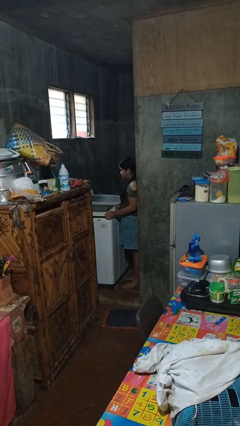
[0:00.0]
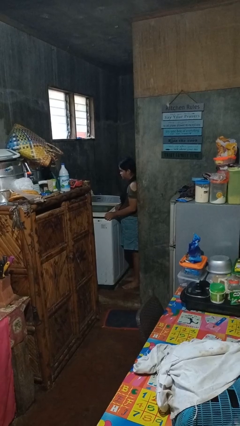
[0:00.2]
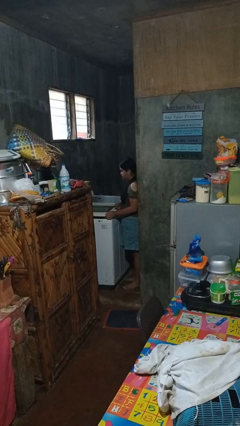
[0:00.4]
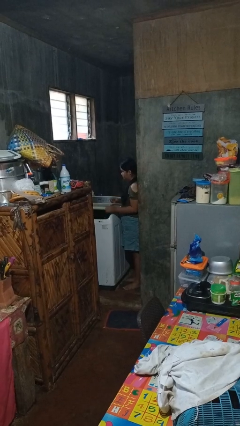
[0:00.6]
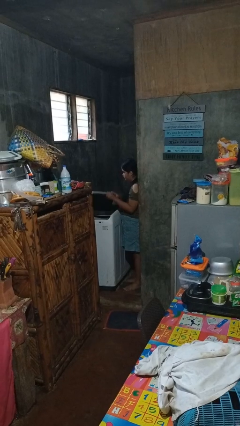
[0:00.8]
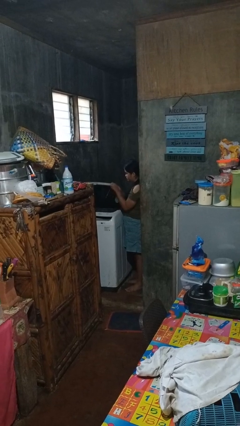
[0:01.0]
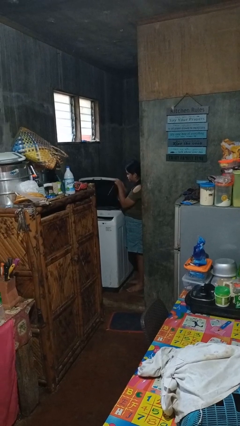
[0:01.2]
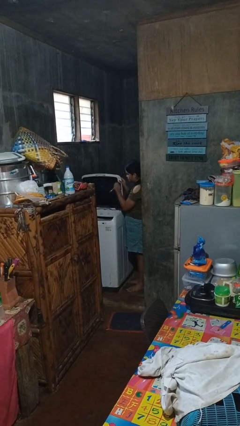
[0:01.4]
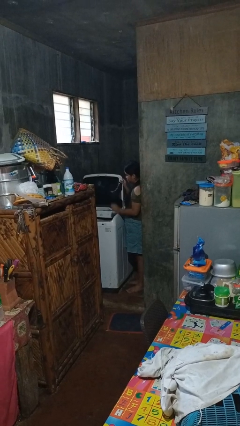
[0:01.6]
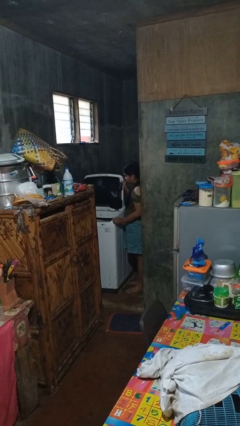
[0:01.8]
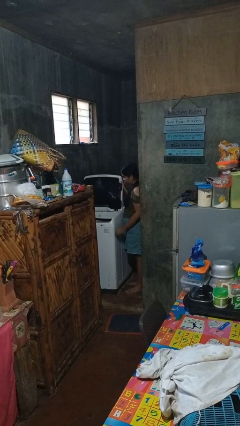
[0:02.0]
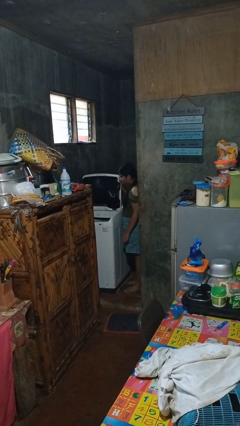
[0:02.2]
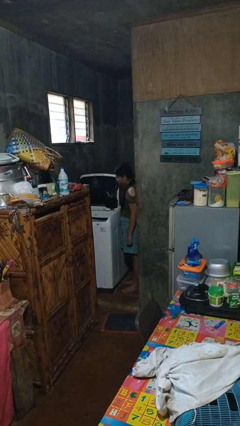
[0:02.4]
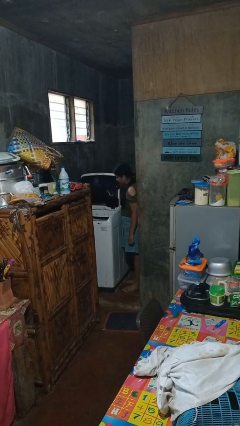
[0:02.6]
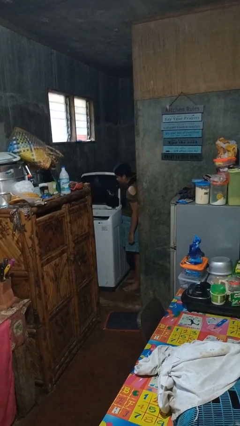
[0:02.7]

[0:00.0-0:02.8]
person opens clothes washer

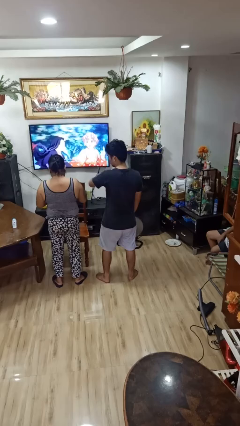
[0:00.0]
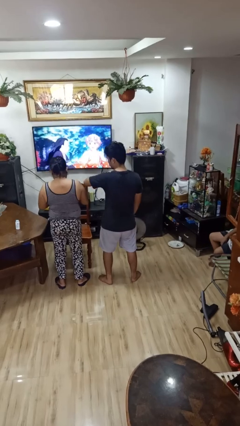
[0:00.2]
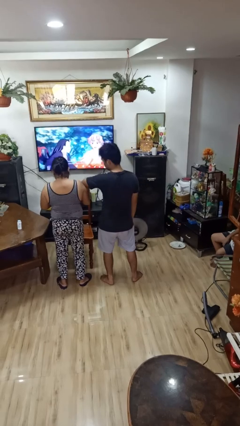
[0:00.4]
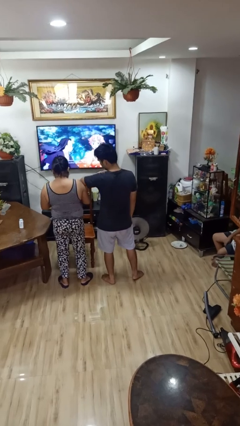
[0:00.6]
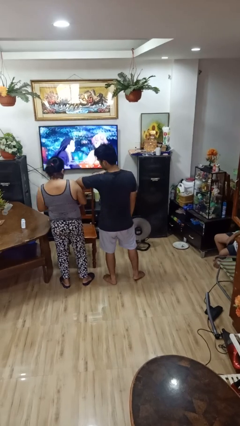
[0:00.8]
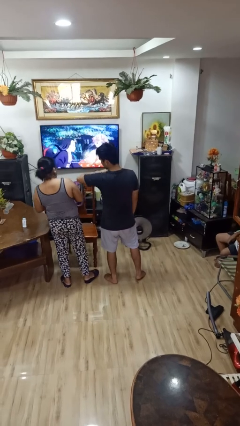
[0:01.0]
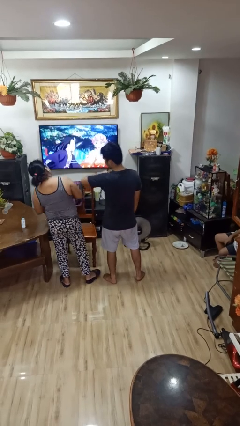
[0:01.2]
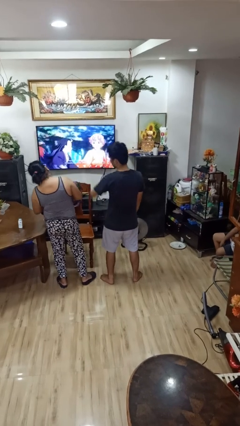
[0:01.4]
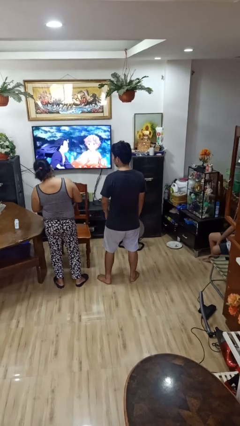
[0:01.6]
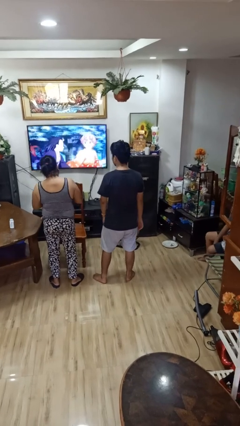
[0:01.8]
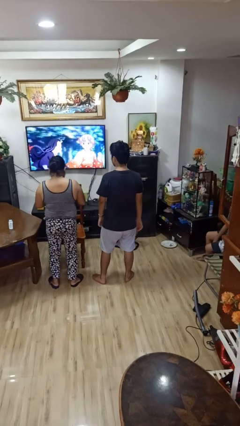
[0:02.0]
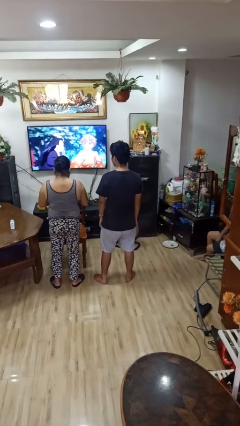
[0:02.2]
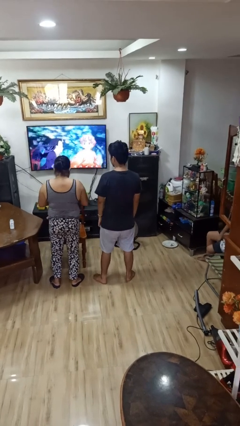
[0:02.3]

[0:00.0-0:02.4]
person shoves person

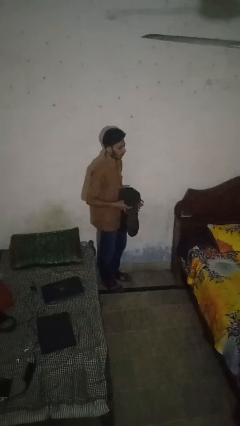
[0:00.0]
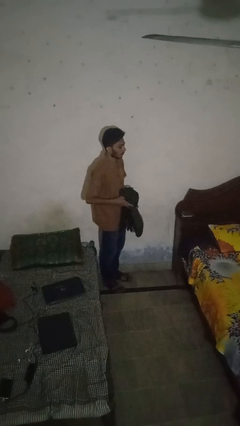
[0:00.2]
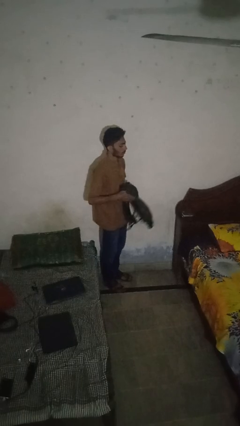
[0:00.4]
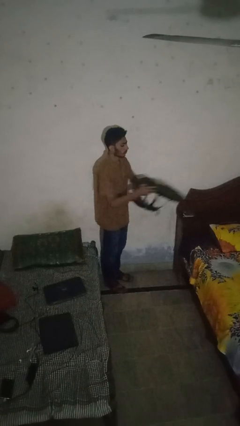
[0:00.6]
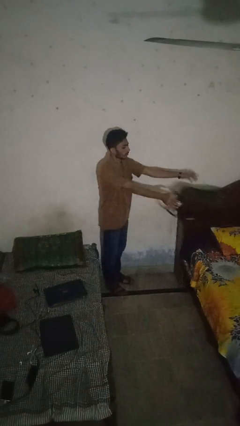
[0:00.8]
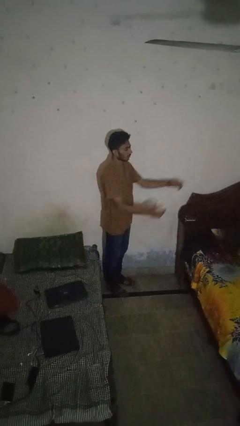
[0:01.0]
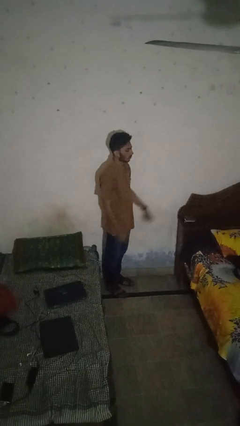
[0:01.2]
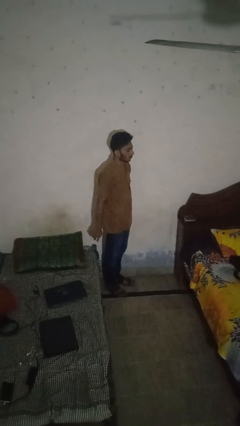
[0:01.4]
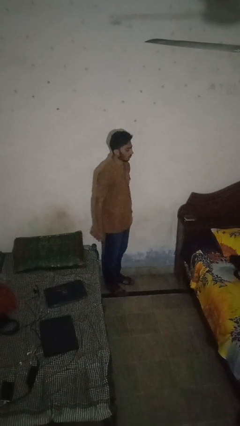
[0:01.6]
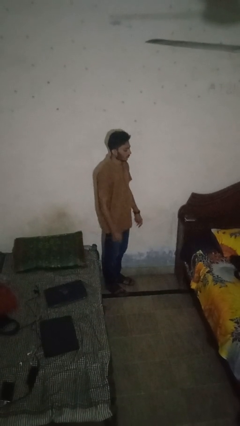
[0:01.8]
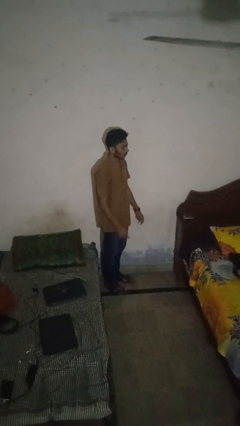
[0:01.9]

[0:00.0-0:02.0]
person throws object on bed

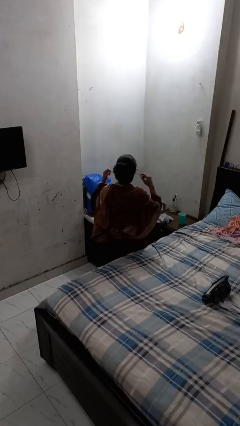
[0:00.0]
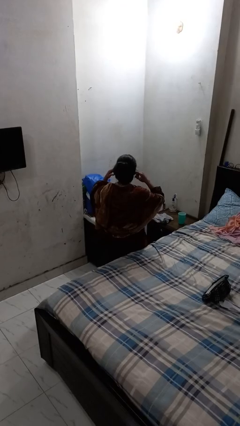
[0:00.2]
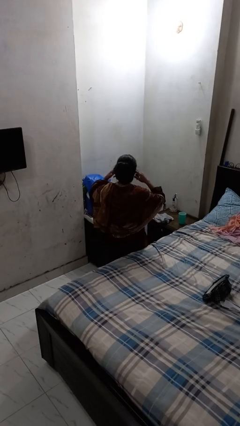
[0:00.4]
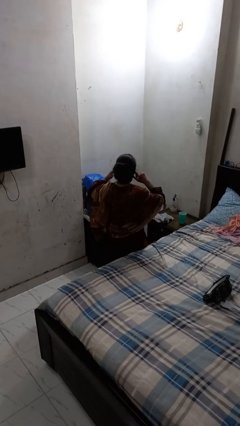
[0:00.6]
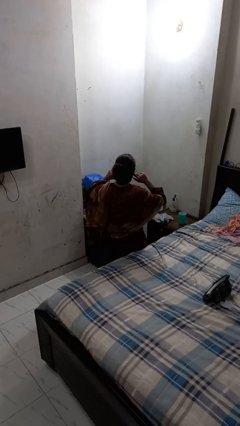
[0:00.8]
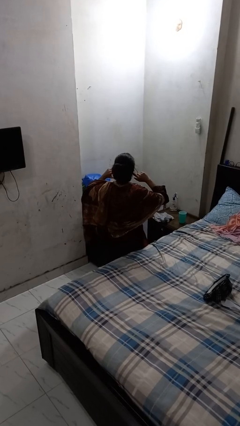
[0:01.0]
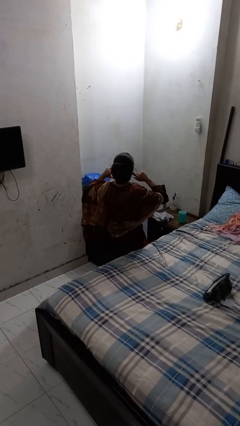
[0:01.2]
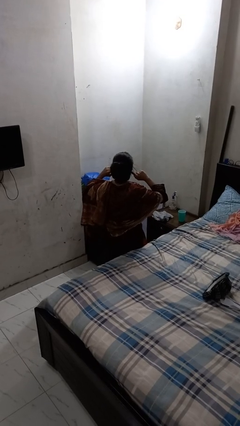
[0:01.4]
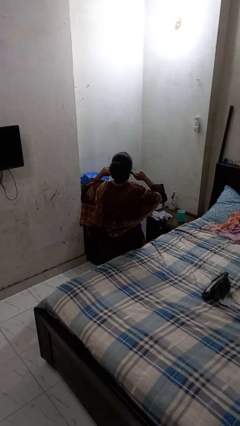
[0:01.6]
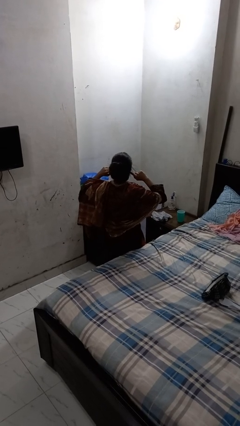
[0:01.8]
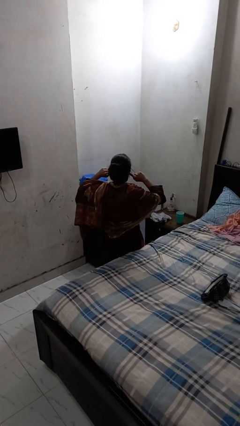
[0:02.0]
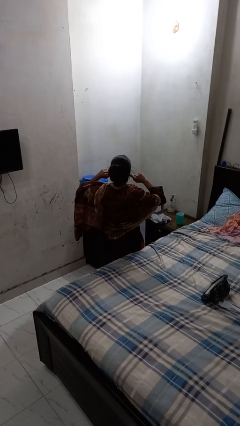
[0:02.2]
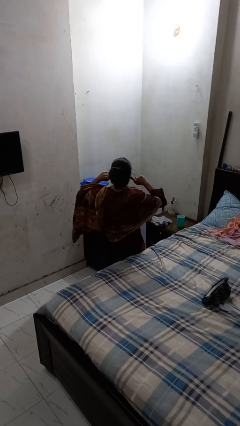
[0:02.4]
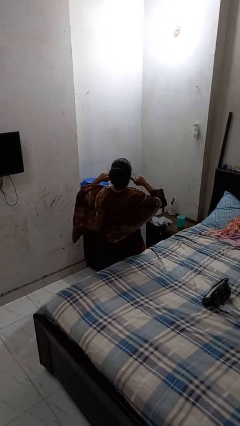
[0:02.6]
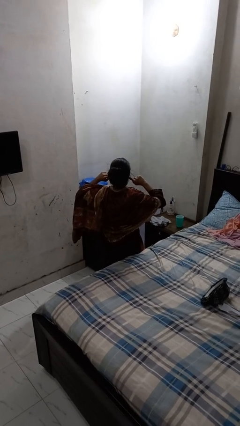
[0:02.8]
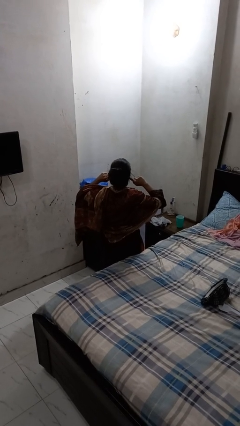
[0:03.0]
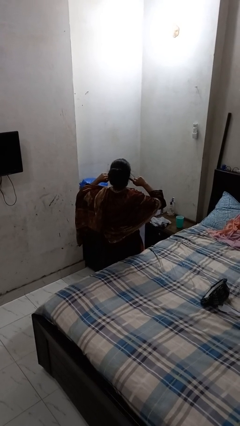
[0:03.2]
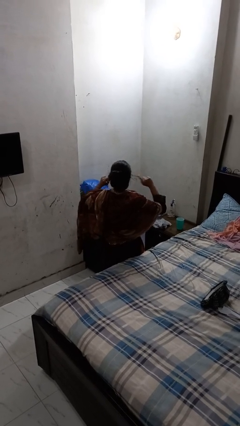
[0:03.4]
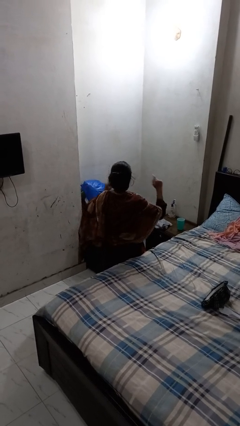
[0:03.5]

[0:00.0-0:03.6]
person puts fingers in ear

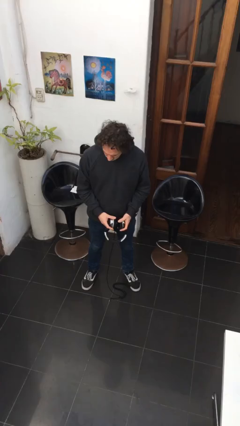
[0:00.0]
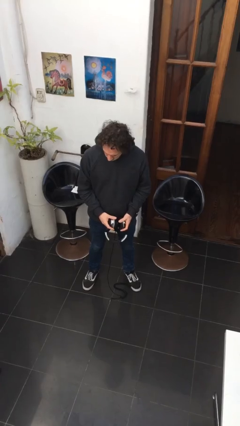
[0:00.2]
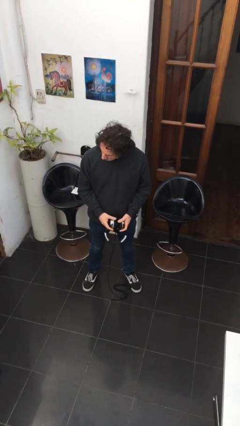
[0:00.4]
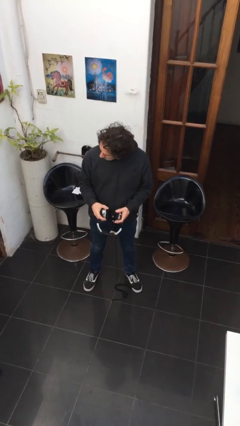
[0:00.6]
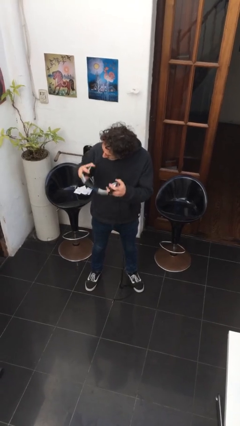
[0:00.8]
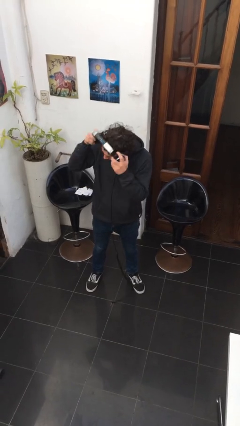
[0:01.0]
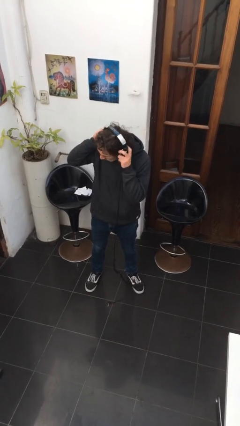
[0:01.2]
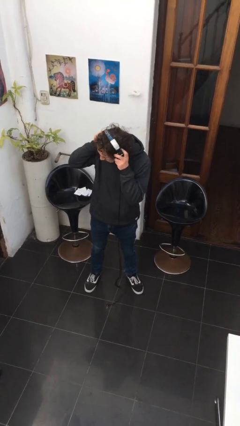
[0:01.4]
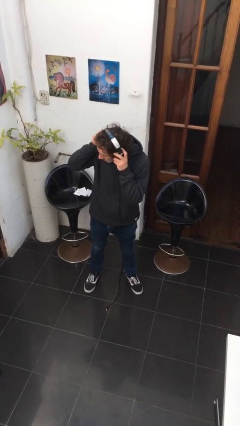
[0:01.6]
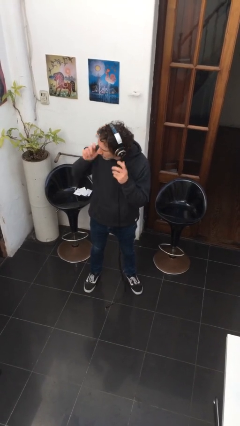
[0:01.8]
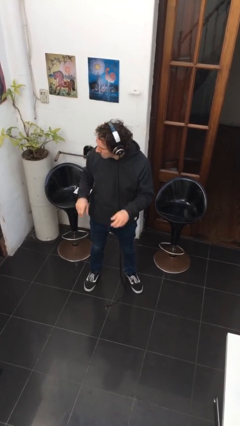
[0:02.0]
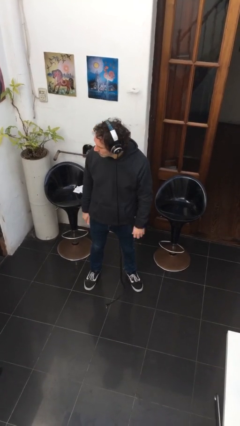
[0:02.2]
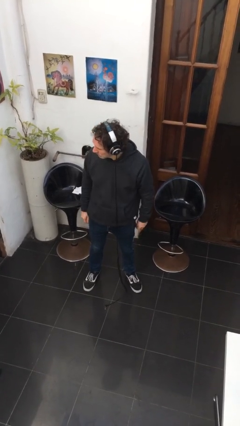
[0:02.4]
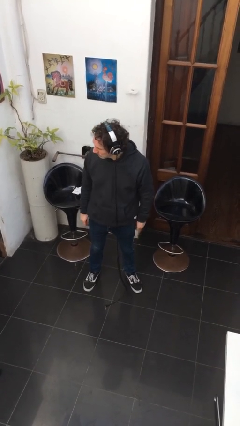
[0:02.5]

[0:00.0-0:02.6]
person puts on headphones

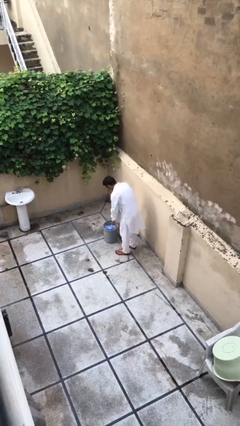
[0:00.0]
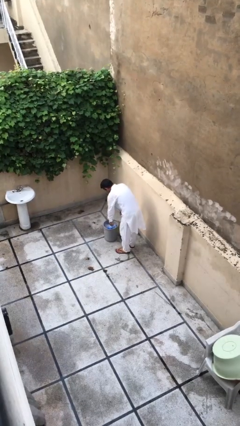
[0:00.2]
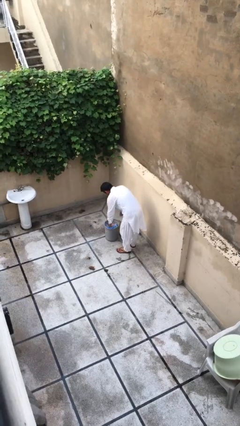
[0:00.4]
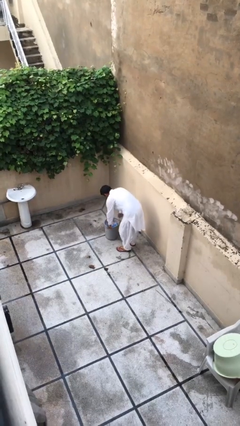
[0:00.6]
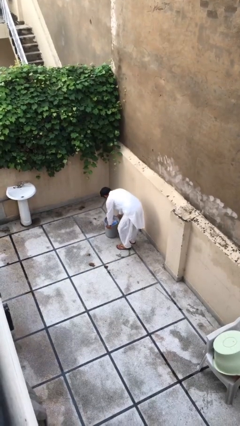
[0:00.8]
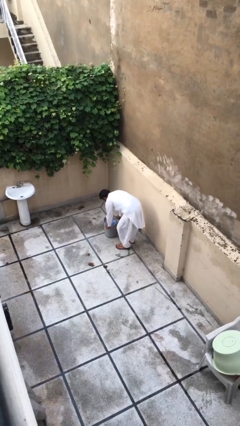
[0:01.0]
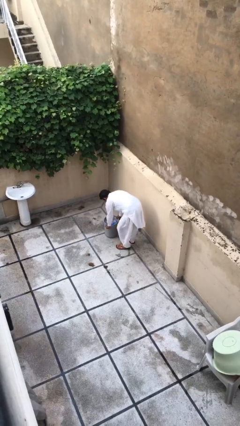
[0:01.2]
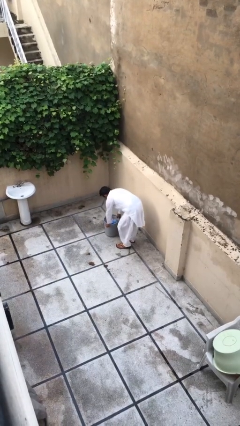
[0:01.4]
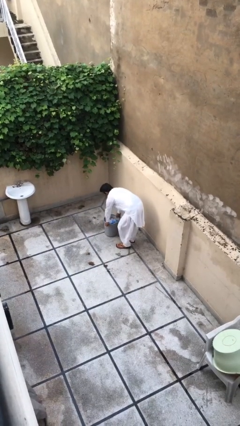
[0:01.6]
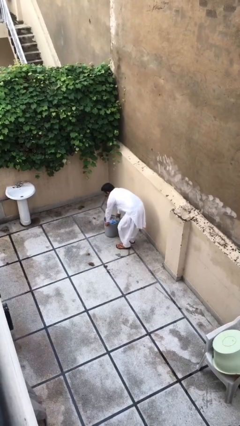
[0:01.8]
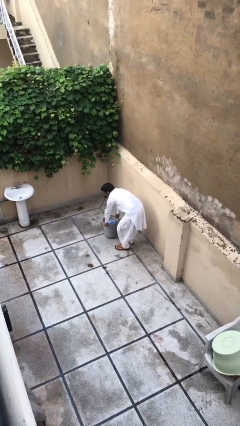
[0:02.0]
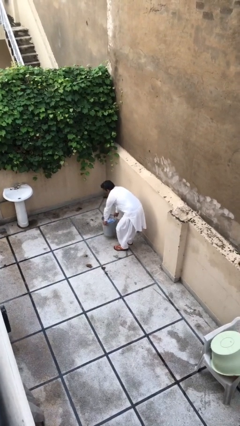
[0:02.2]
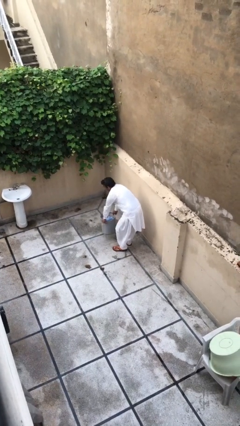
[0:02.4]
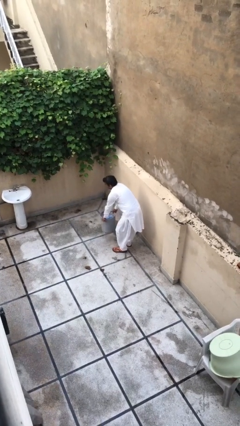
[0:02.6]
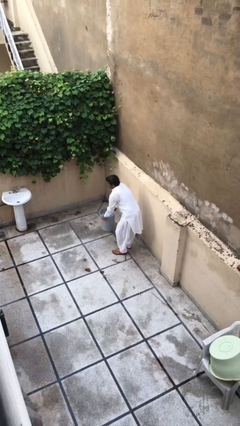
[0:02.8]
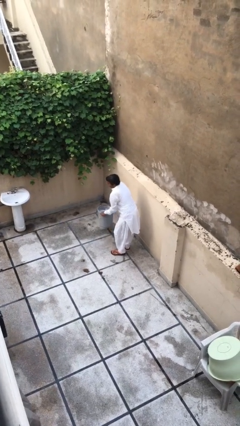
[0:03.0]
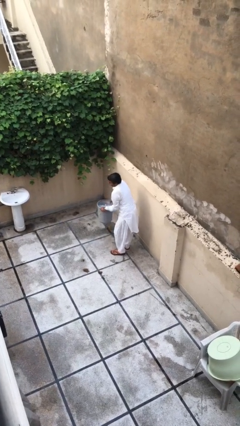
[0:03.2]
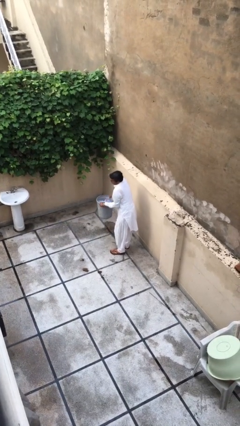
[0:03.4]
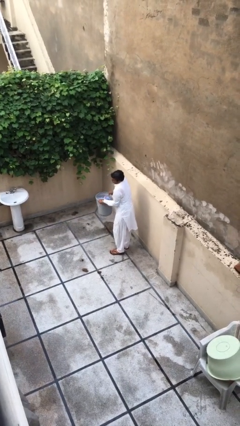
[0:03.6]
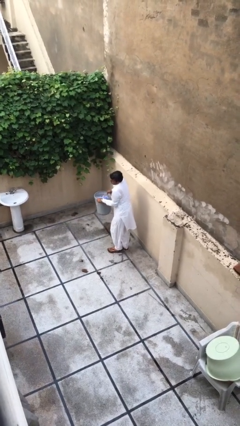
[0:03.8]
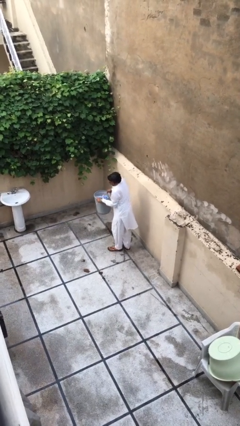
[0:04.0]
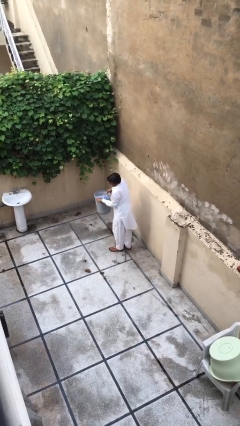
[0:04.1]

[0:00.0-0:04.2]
person picks up object from floor
